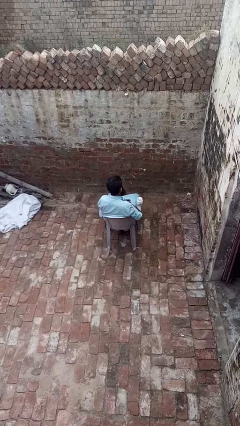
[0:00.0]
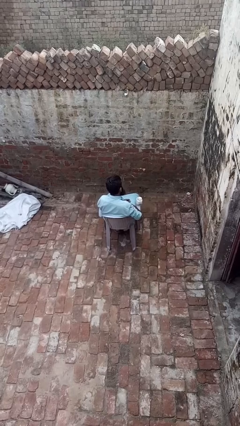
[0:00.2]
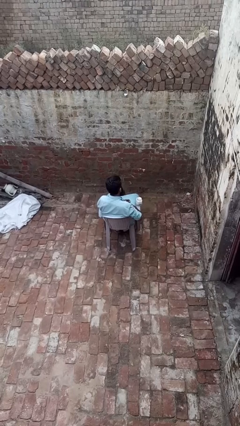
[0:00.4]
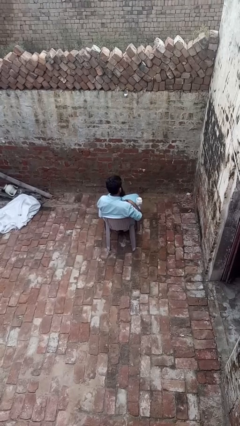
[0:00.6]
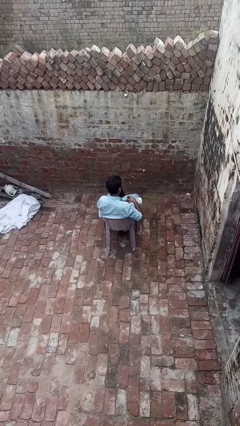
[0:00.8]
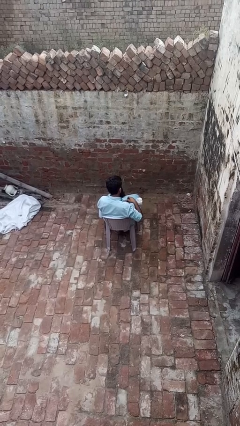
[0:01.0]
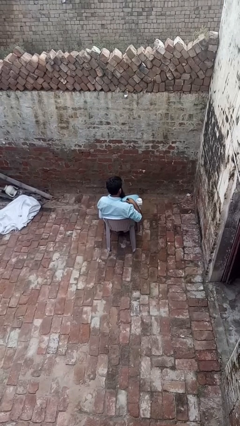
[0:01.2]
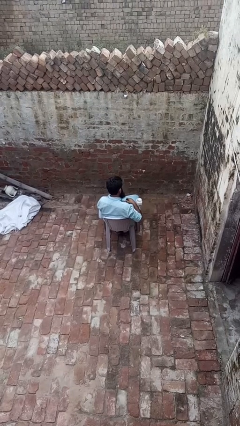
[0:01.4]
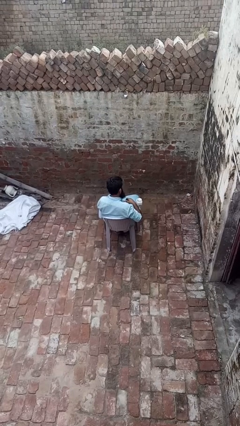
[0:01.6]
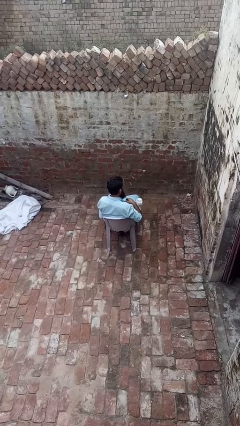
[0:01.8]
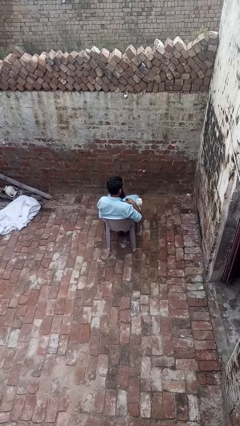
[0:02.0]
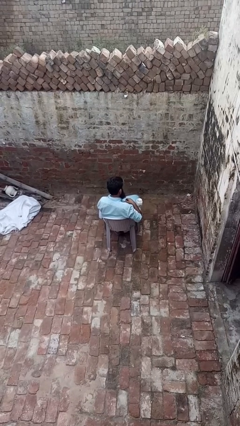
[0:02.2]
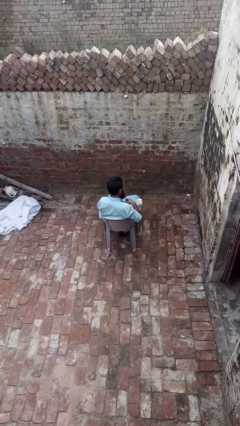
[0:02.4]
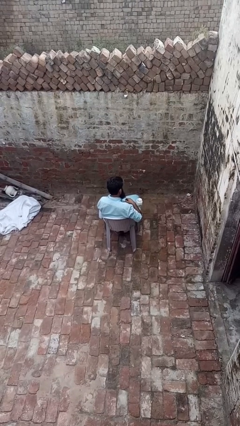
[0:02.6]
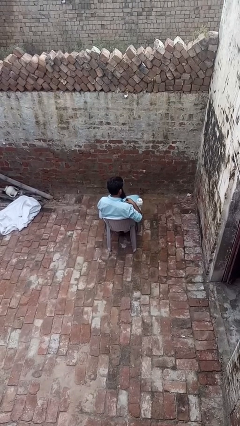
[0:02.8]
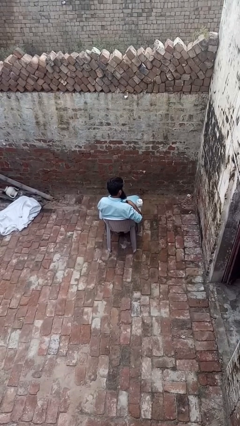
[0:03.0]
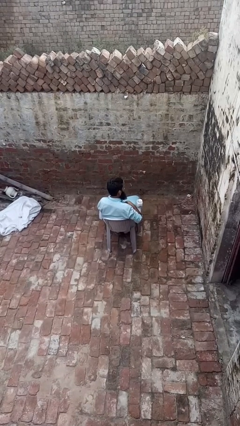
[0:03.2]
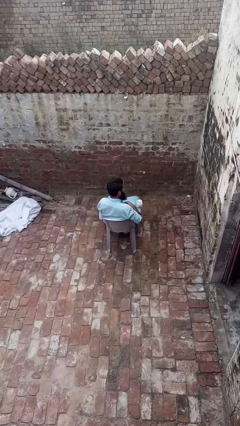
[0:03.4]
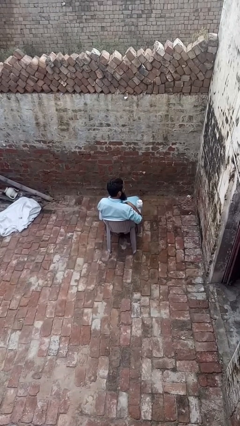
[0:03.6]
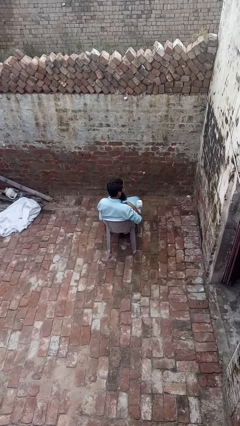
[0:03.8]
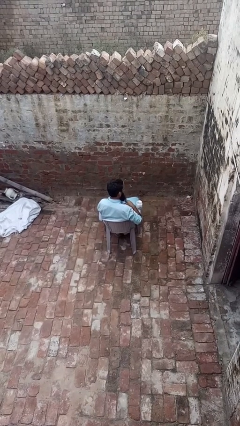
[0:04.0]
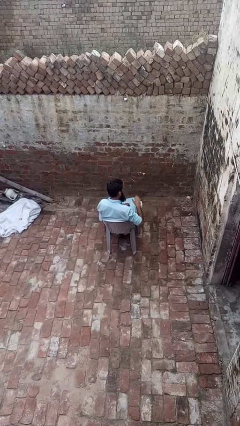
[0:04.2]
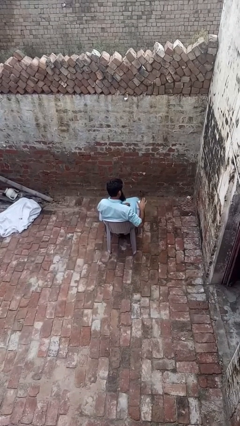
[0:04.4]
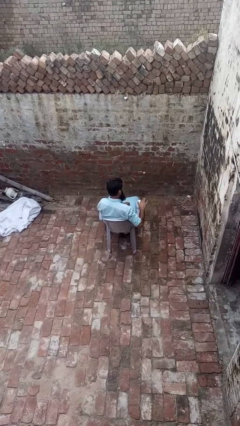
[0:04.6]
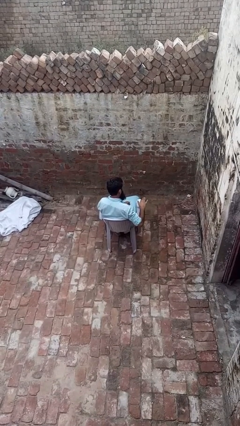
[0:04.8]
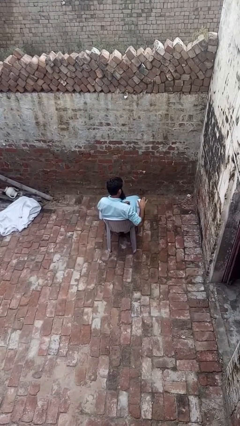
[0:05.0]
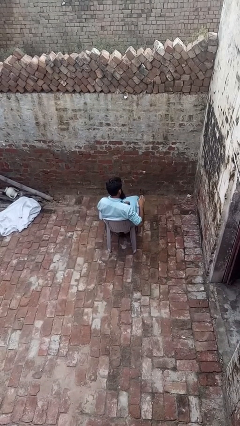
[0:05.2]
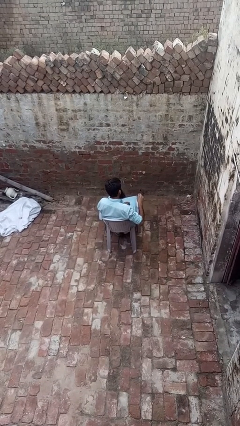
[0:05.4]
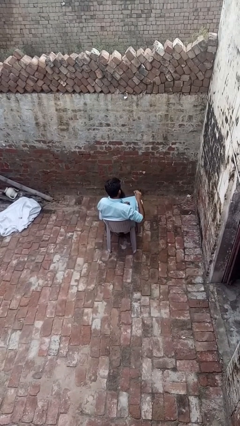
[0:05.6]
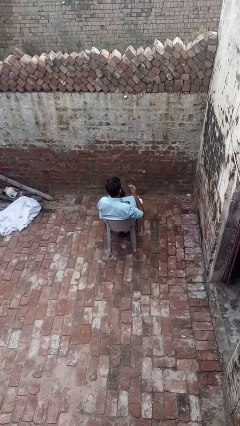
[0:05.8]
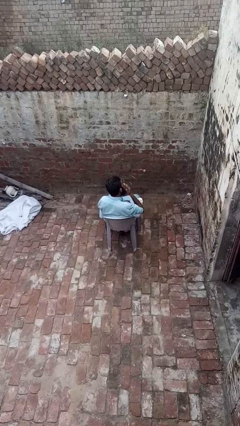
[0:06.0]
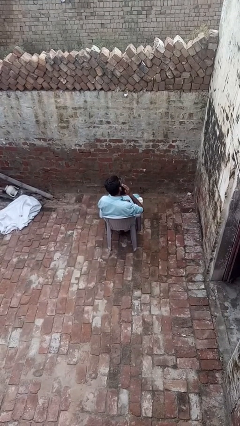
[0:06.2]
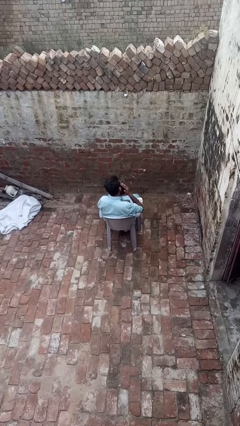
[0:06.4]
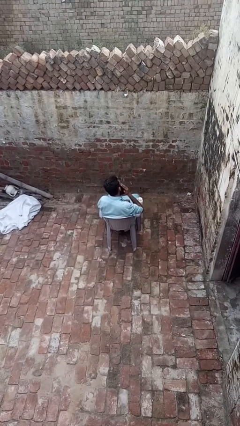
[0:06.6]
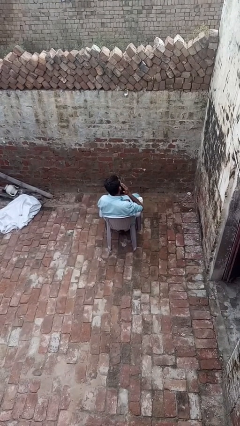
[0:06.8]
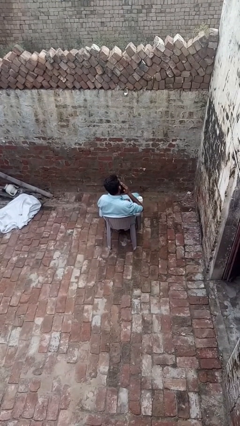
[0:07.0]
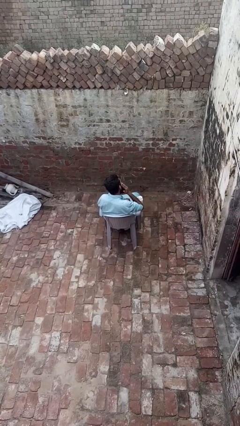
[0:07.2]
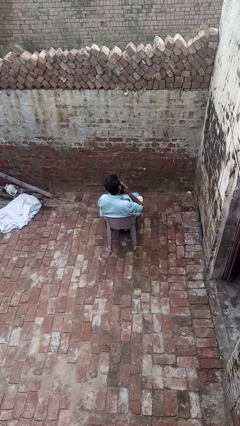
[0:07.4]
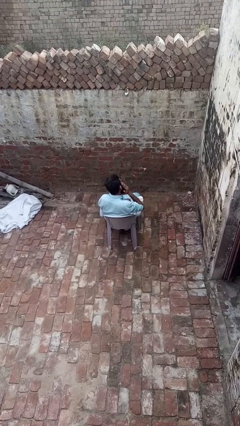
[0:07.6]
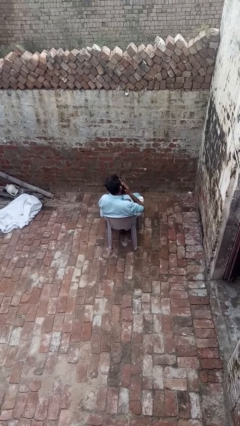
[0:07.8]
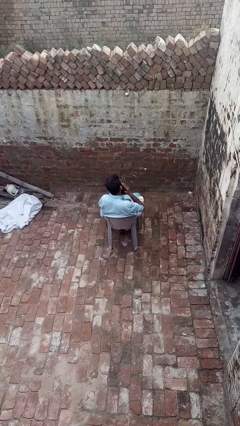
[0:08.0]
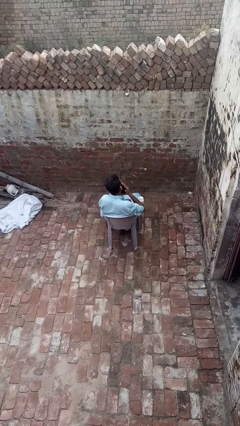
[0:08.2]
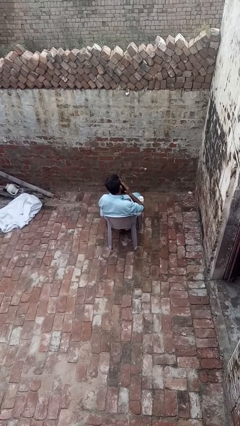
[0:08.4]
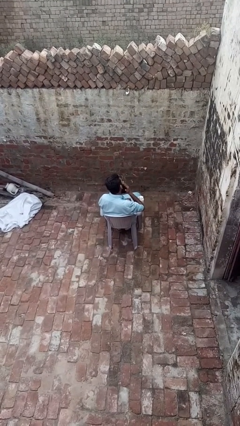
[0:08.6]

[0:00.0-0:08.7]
person applies facial moisturizer

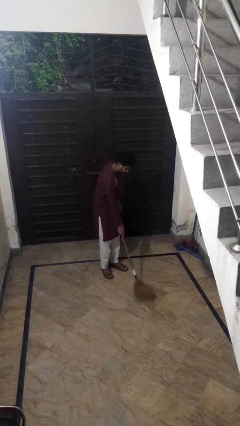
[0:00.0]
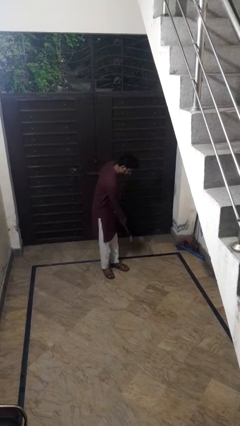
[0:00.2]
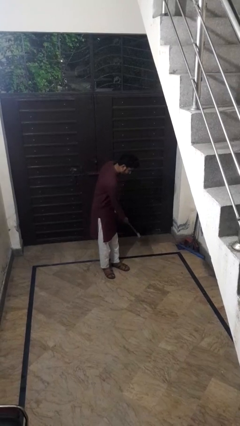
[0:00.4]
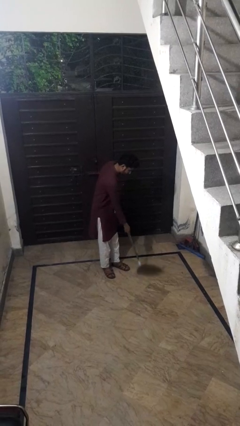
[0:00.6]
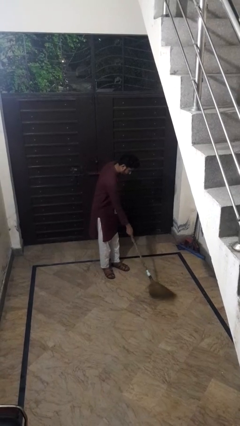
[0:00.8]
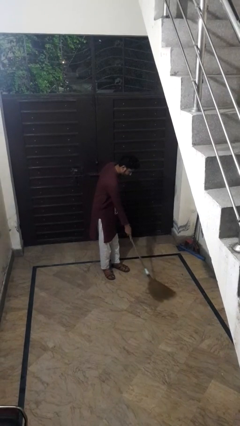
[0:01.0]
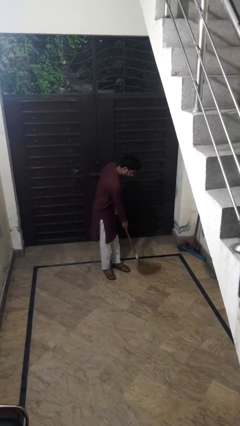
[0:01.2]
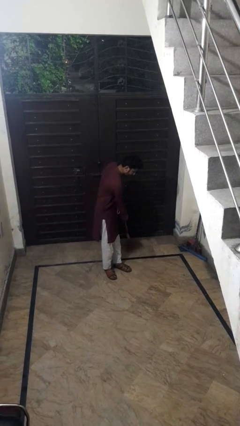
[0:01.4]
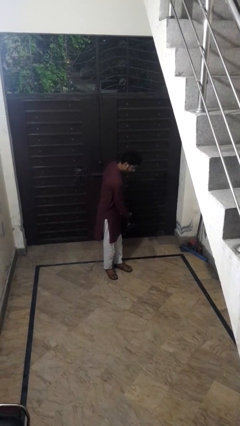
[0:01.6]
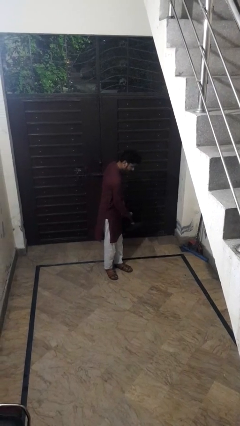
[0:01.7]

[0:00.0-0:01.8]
person sweeps floor

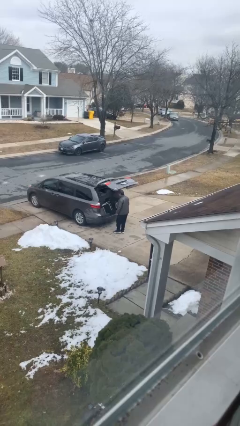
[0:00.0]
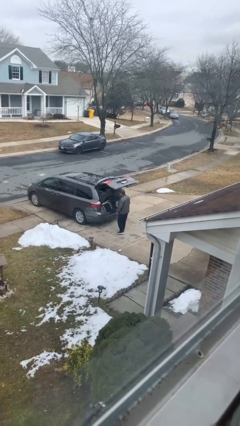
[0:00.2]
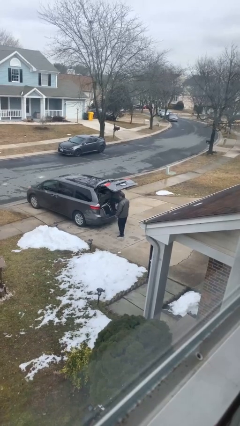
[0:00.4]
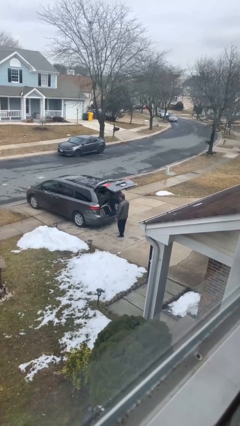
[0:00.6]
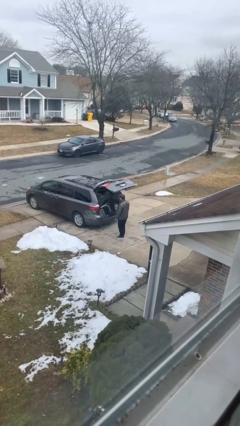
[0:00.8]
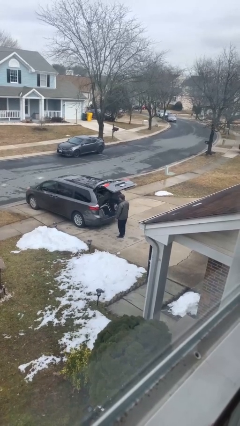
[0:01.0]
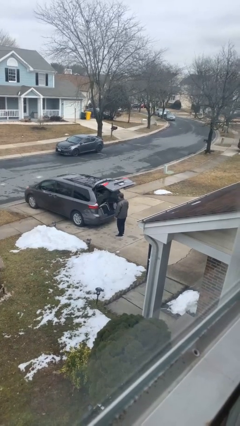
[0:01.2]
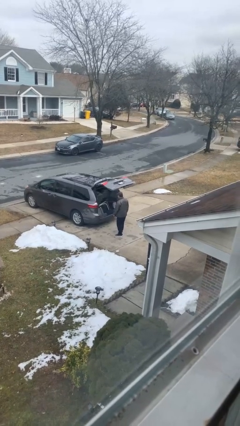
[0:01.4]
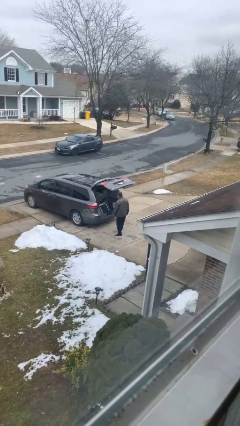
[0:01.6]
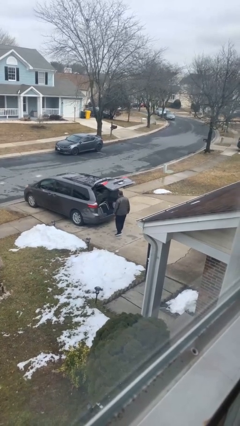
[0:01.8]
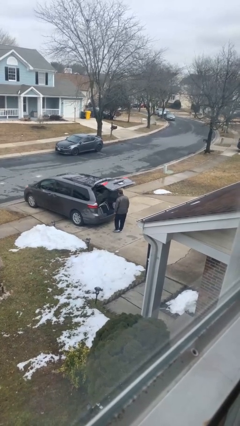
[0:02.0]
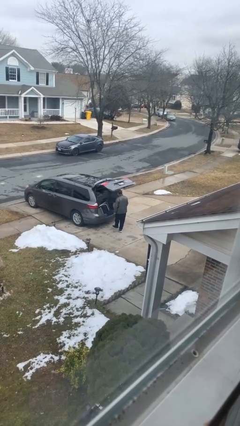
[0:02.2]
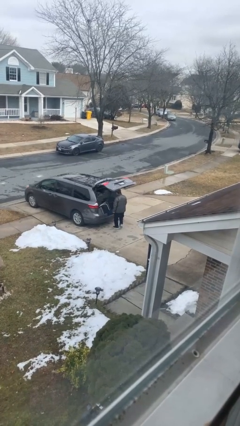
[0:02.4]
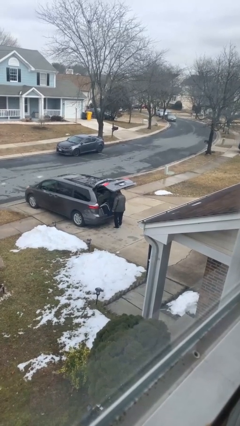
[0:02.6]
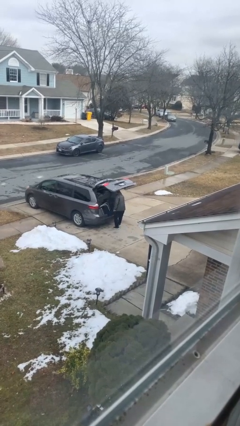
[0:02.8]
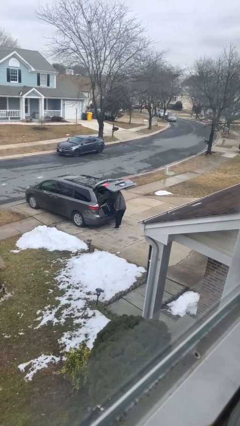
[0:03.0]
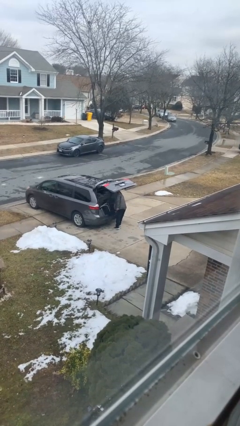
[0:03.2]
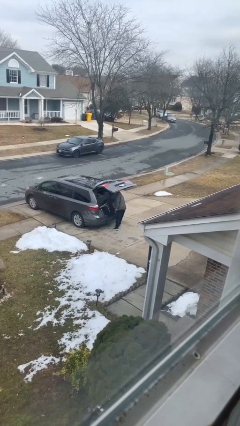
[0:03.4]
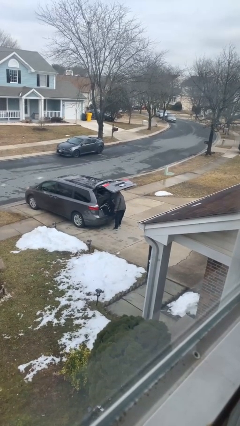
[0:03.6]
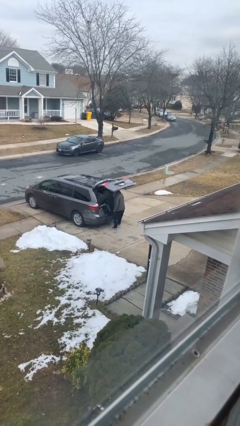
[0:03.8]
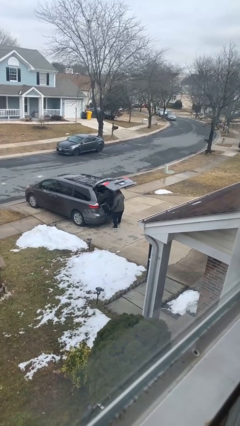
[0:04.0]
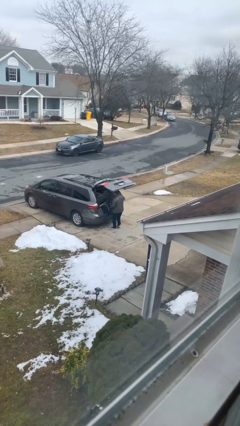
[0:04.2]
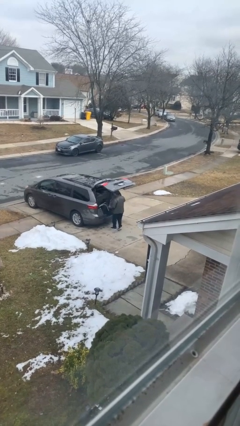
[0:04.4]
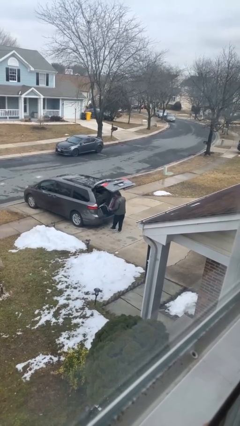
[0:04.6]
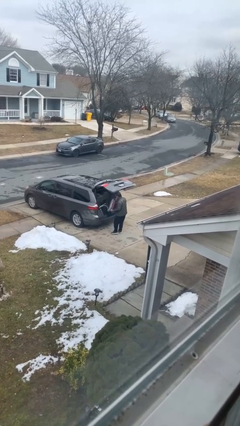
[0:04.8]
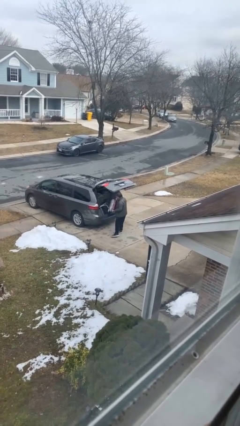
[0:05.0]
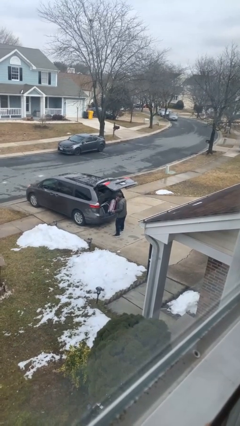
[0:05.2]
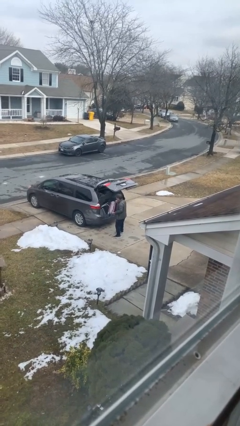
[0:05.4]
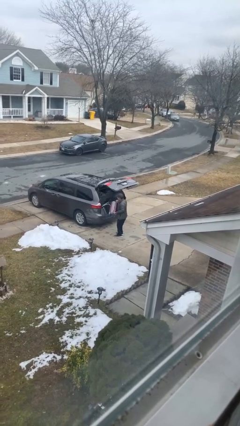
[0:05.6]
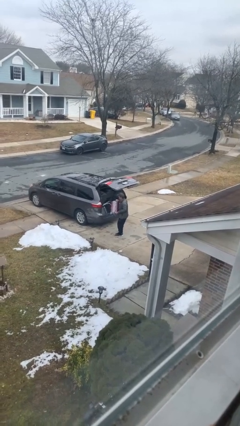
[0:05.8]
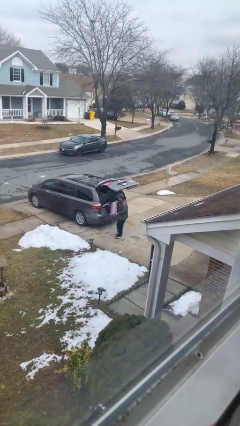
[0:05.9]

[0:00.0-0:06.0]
person unloads car

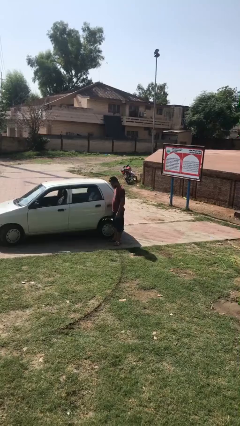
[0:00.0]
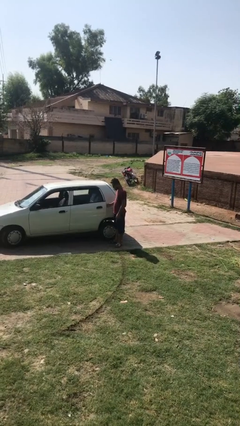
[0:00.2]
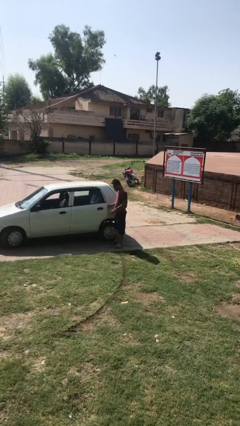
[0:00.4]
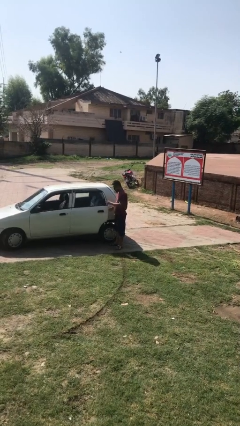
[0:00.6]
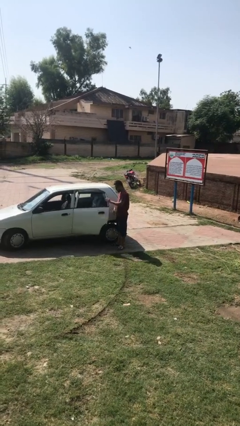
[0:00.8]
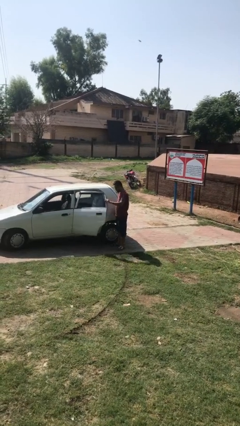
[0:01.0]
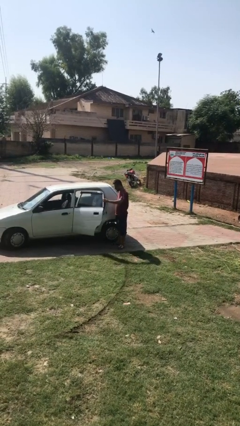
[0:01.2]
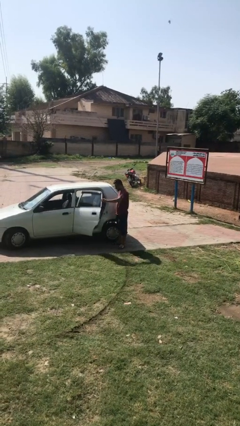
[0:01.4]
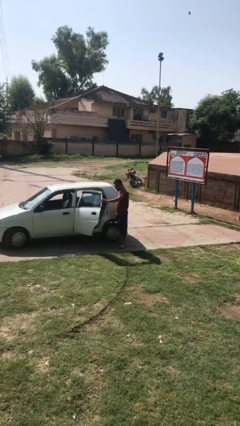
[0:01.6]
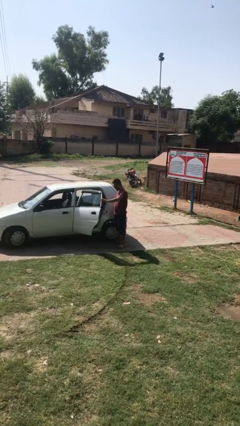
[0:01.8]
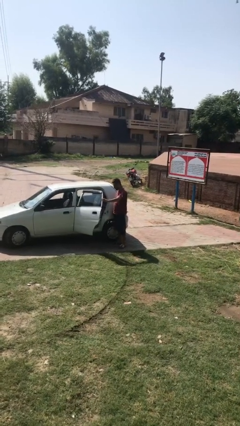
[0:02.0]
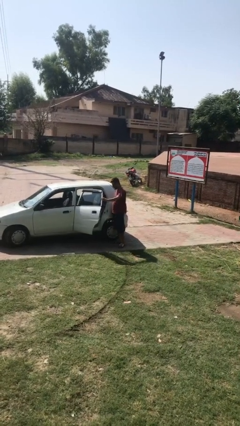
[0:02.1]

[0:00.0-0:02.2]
person opens car door
